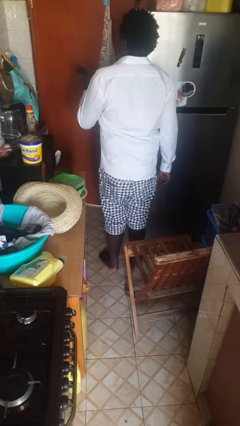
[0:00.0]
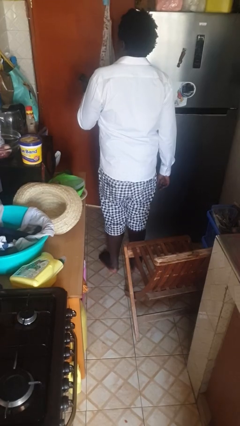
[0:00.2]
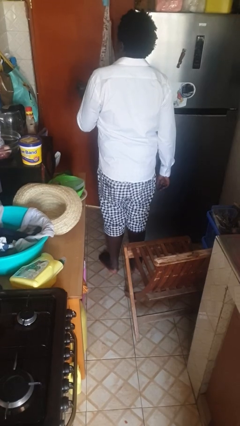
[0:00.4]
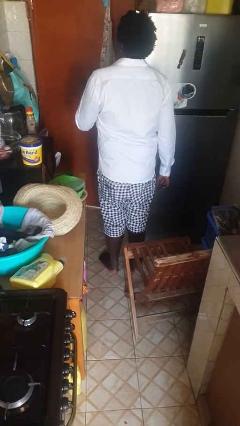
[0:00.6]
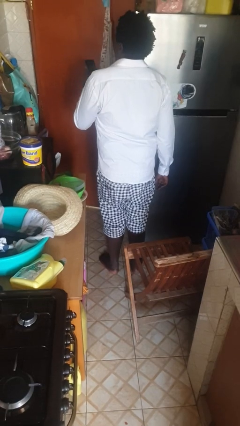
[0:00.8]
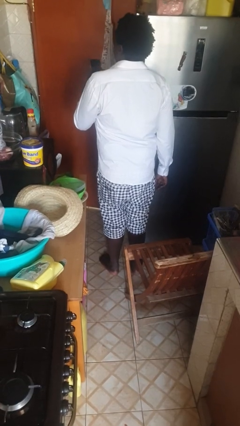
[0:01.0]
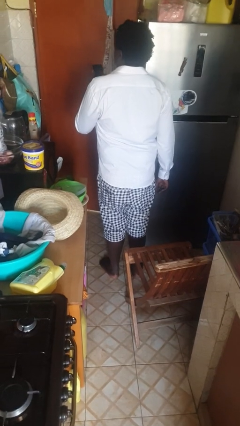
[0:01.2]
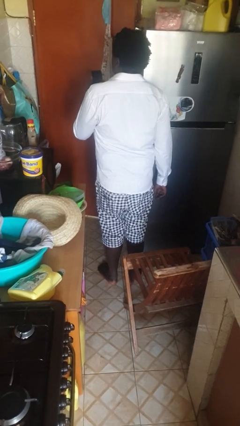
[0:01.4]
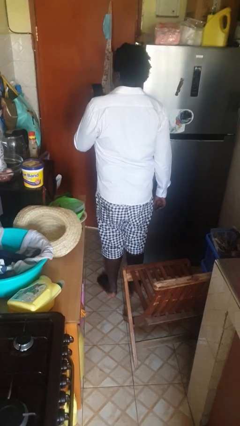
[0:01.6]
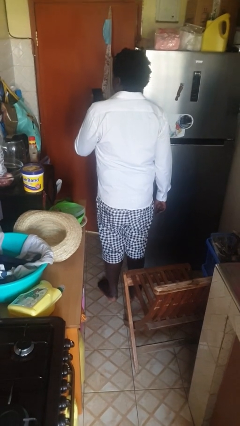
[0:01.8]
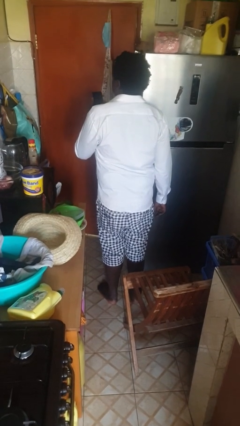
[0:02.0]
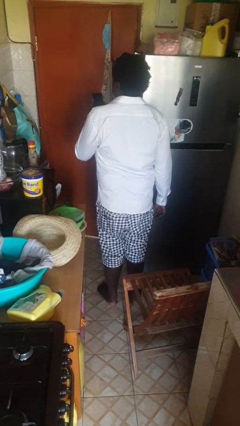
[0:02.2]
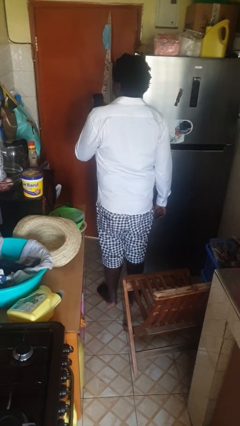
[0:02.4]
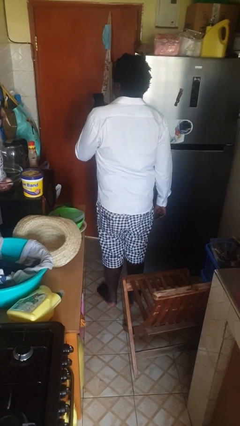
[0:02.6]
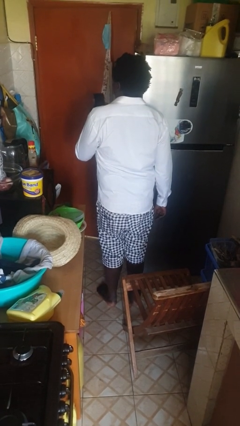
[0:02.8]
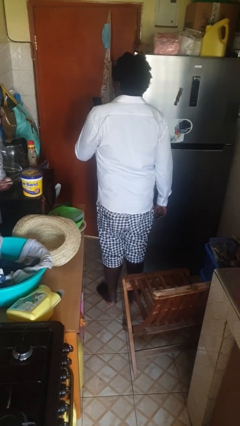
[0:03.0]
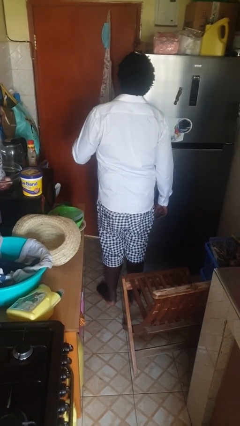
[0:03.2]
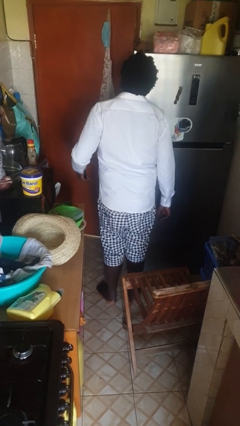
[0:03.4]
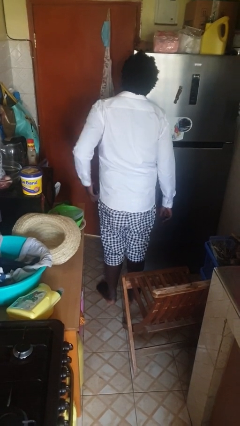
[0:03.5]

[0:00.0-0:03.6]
person takes phone from pocket

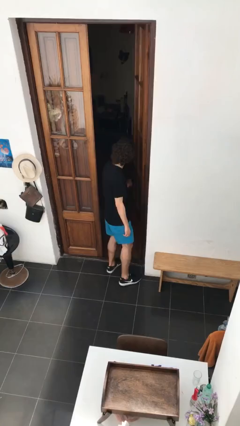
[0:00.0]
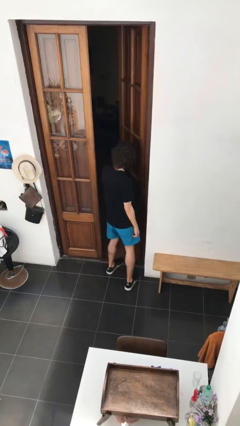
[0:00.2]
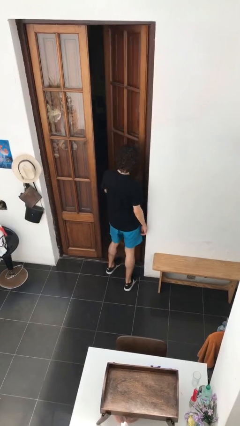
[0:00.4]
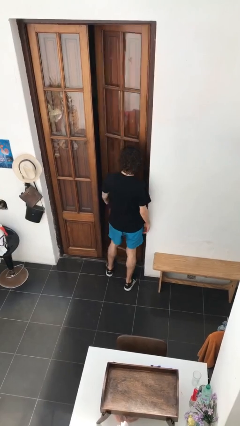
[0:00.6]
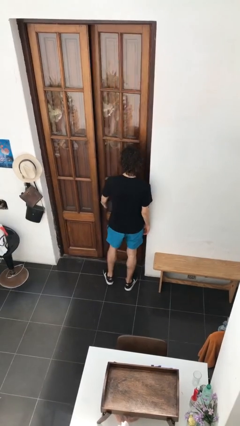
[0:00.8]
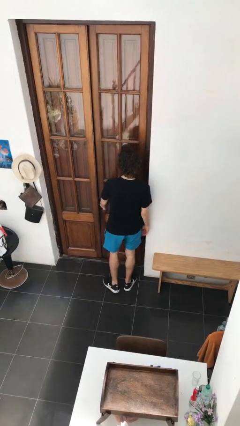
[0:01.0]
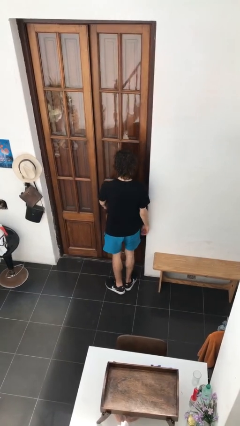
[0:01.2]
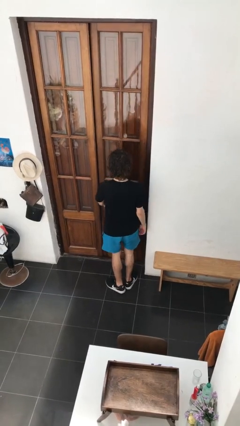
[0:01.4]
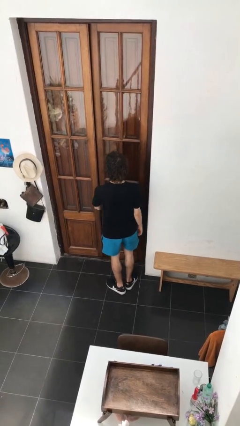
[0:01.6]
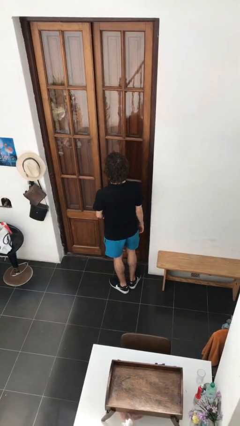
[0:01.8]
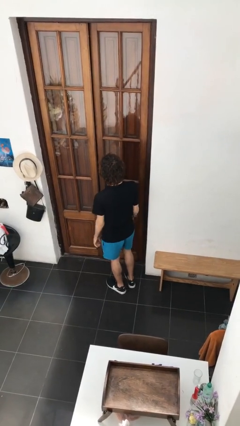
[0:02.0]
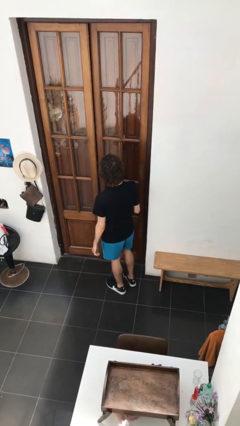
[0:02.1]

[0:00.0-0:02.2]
person closes facility door

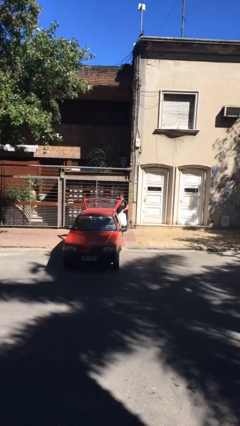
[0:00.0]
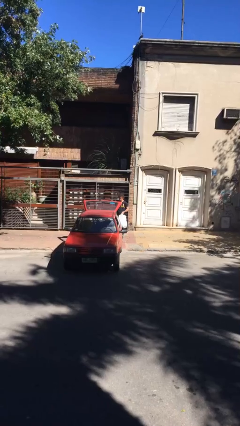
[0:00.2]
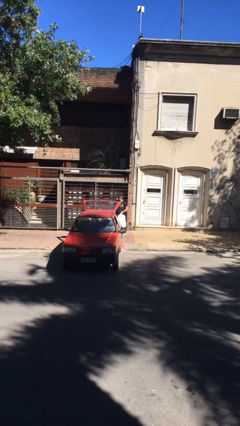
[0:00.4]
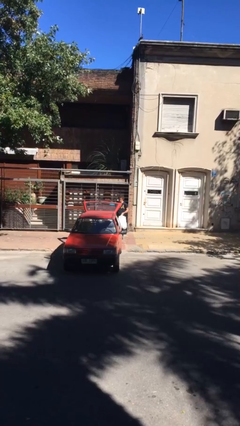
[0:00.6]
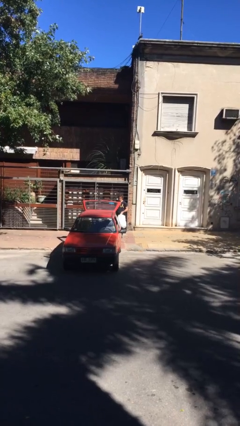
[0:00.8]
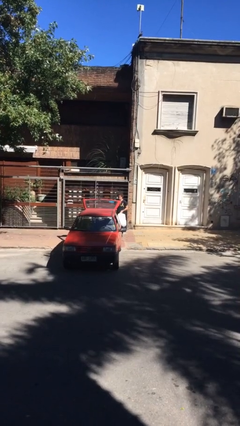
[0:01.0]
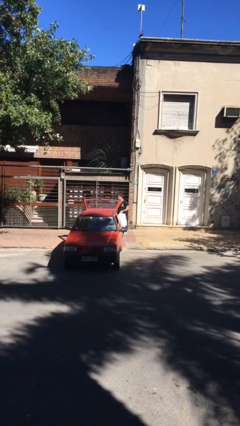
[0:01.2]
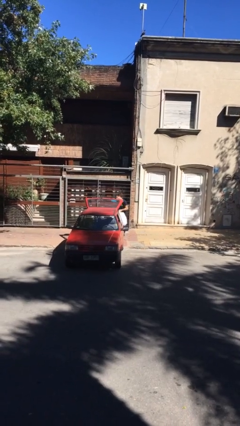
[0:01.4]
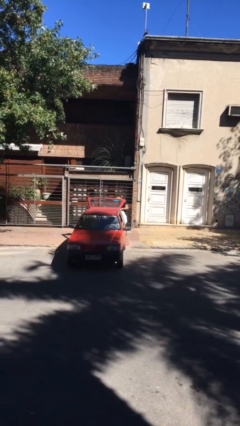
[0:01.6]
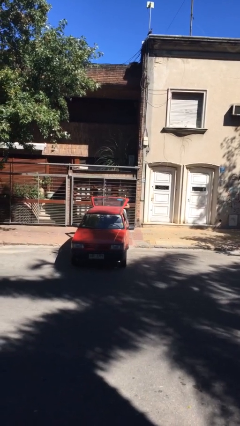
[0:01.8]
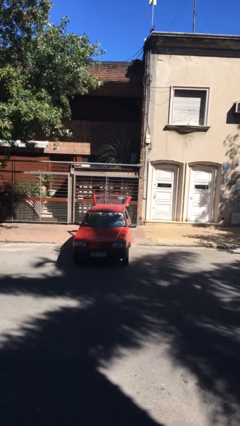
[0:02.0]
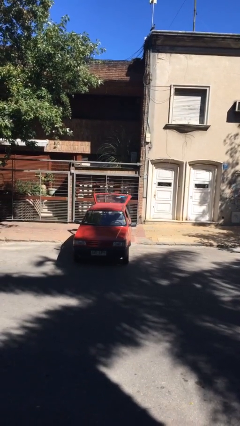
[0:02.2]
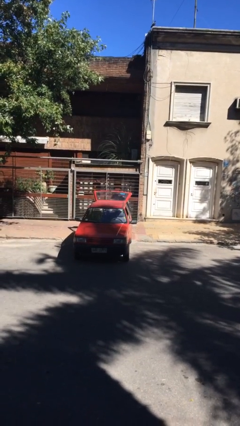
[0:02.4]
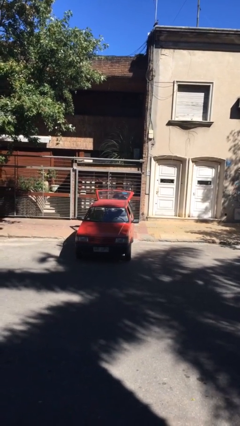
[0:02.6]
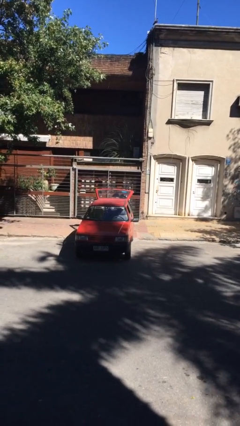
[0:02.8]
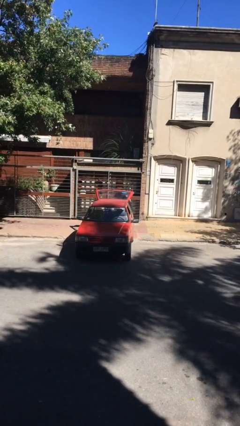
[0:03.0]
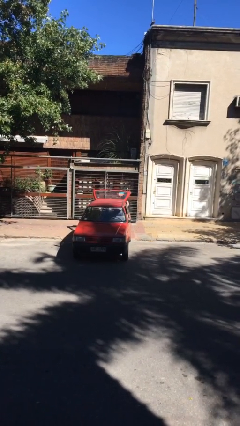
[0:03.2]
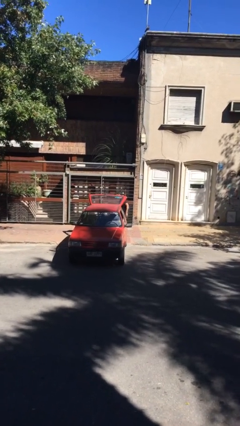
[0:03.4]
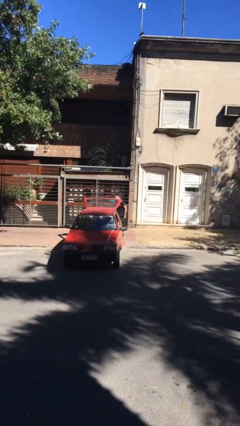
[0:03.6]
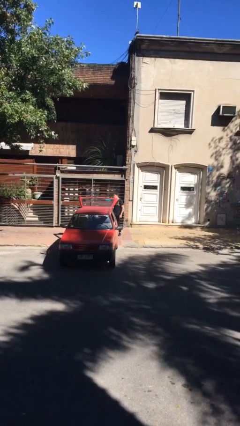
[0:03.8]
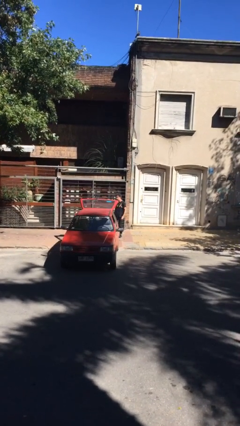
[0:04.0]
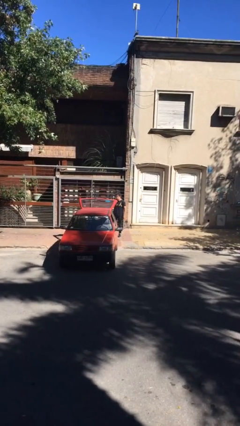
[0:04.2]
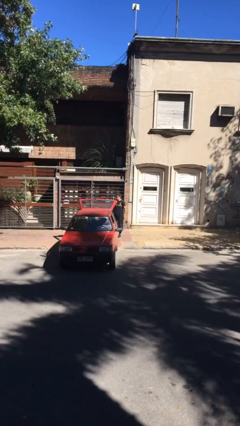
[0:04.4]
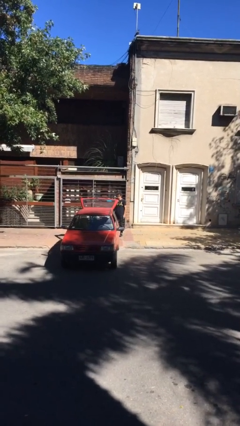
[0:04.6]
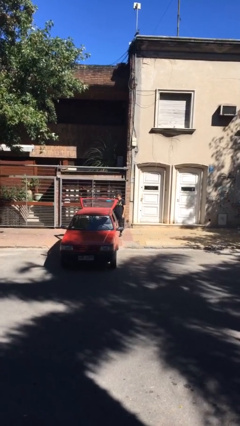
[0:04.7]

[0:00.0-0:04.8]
person loads car

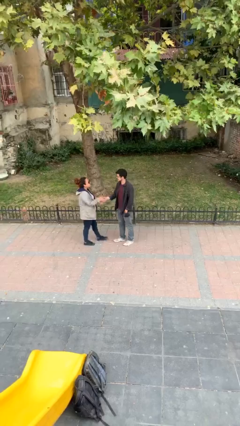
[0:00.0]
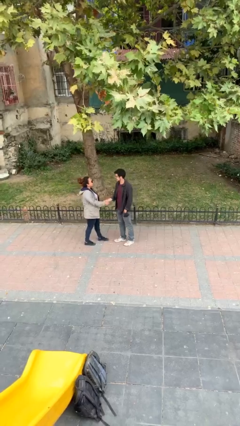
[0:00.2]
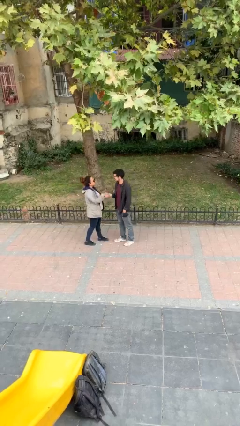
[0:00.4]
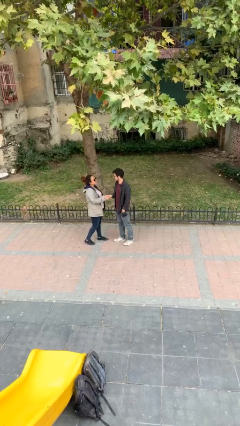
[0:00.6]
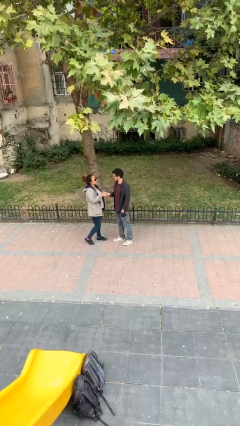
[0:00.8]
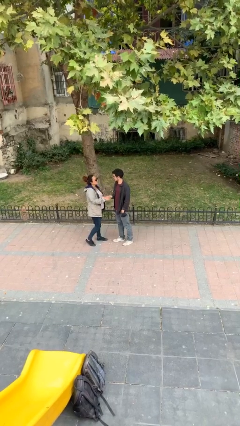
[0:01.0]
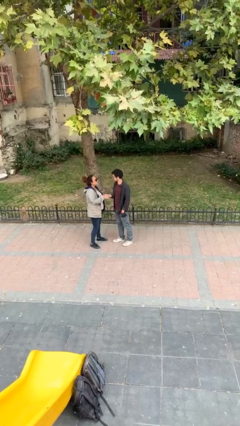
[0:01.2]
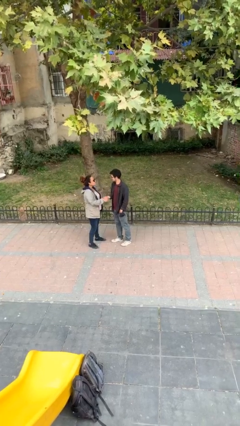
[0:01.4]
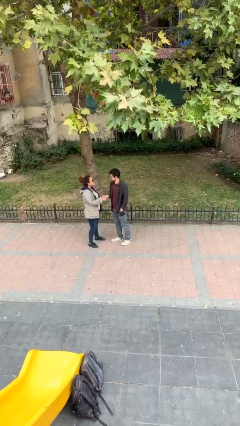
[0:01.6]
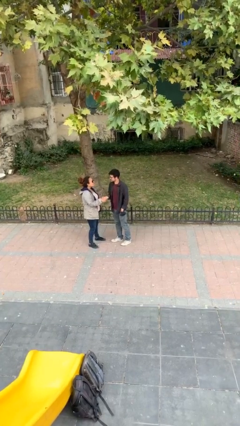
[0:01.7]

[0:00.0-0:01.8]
person shakes hand

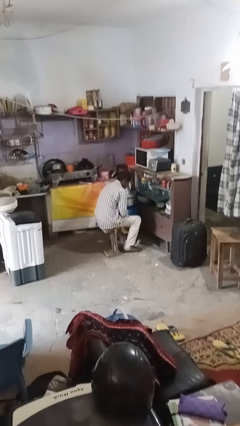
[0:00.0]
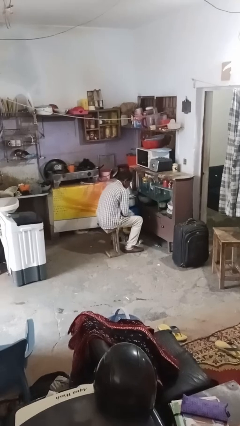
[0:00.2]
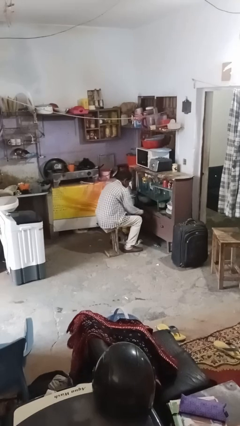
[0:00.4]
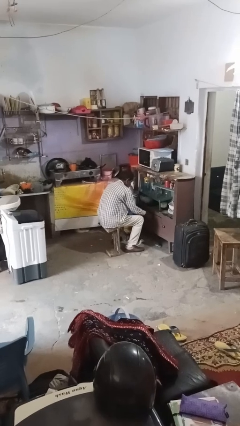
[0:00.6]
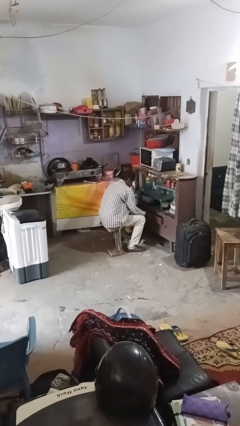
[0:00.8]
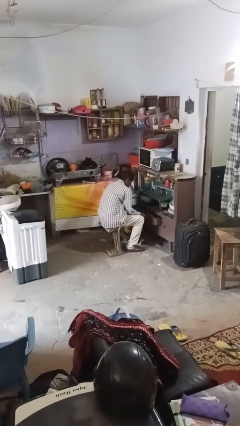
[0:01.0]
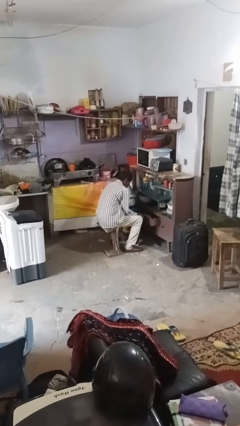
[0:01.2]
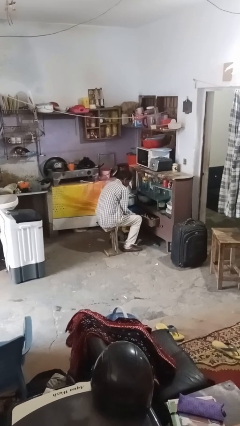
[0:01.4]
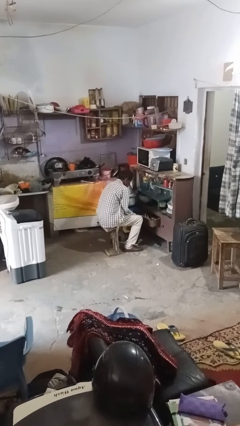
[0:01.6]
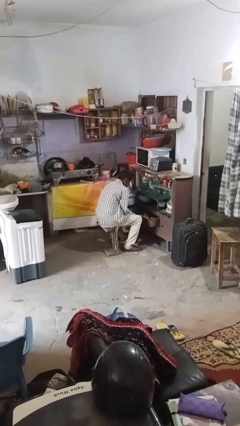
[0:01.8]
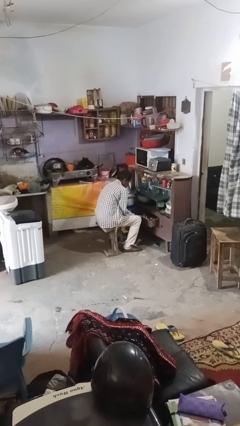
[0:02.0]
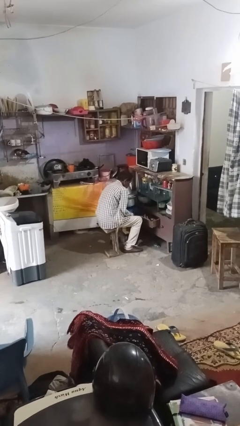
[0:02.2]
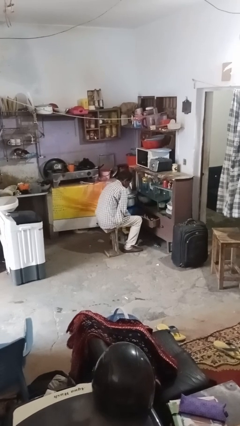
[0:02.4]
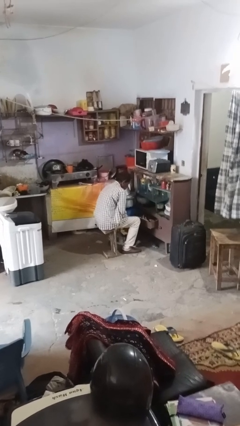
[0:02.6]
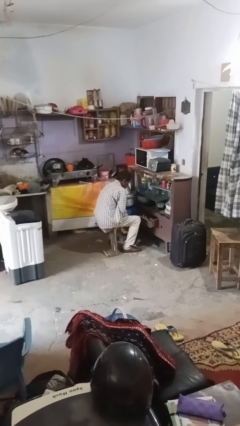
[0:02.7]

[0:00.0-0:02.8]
person opens kitchen drawer

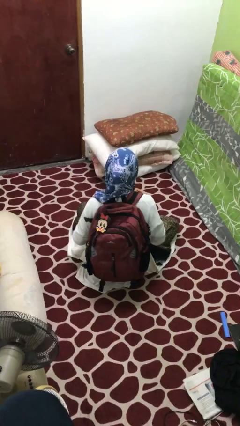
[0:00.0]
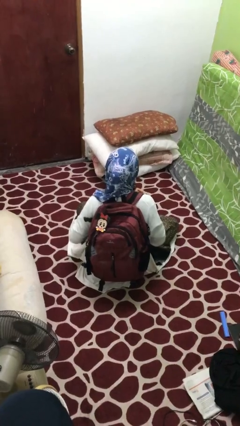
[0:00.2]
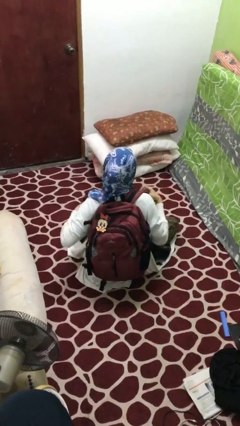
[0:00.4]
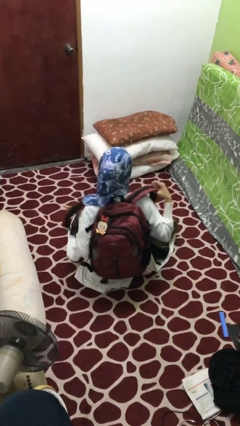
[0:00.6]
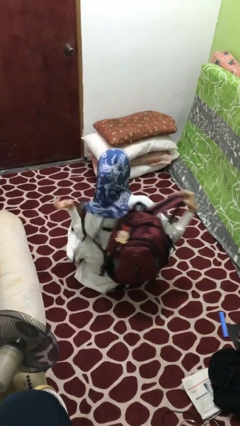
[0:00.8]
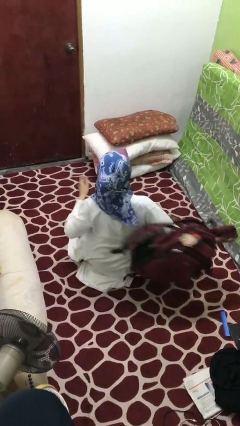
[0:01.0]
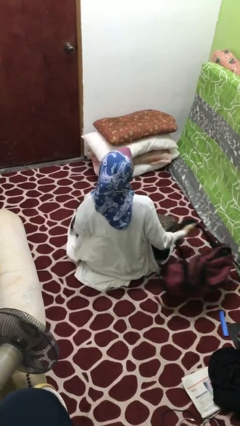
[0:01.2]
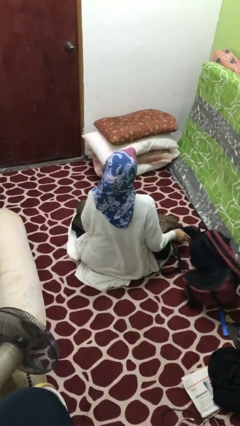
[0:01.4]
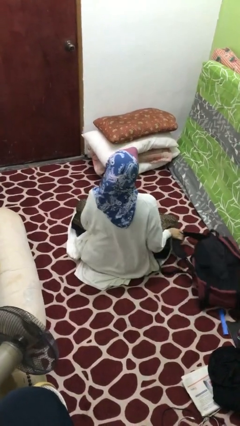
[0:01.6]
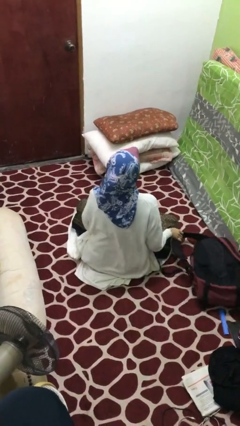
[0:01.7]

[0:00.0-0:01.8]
person takes off backpack

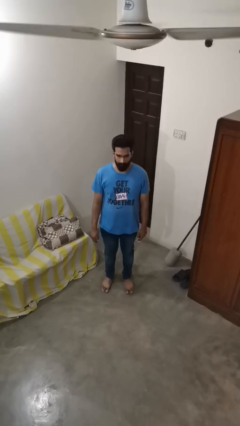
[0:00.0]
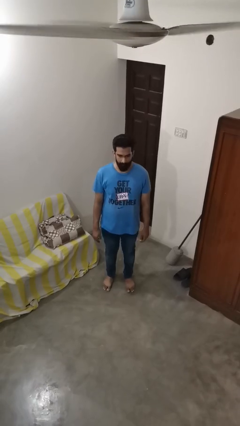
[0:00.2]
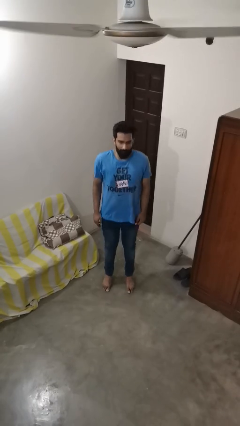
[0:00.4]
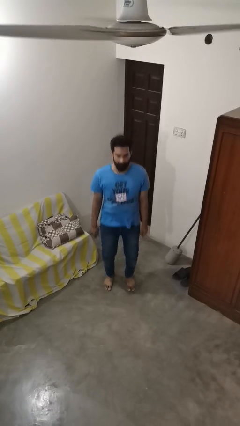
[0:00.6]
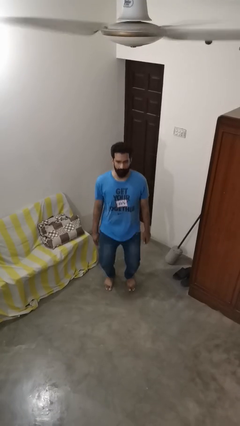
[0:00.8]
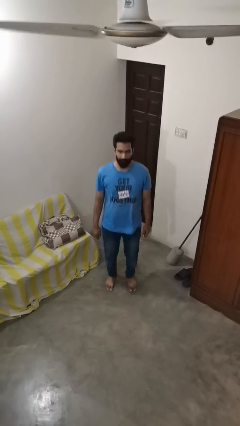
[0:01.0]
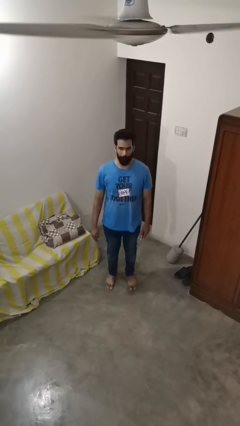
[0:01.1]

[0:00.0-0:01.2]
person jumps
